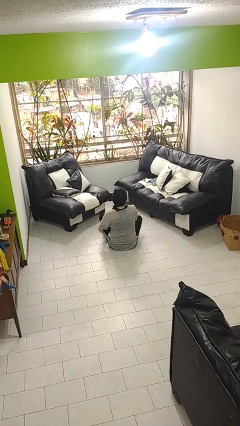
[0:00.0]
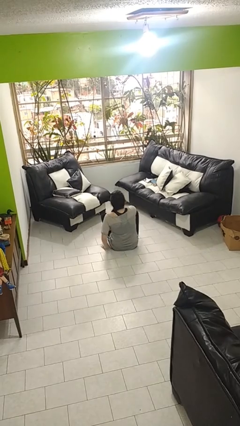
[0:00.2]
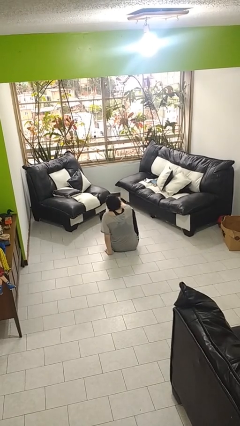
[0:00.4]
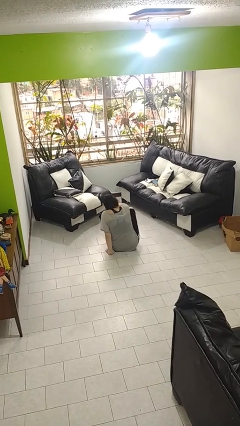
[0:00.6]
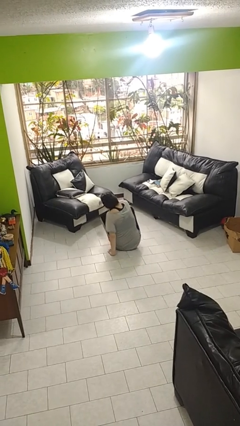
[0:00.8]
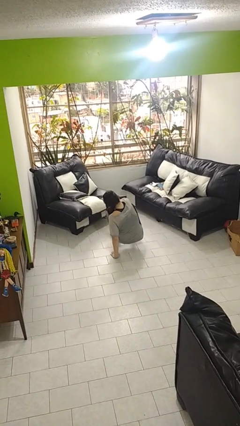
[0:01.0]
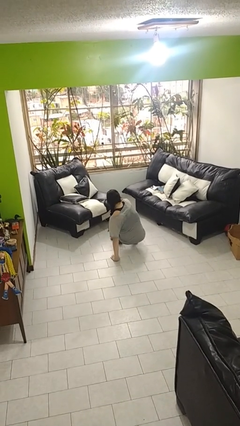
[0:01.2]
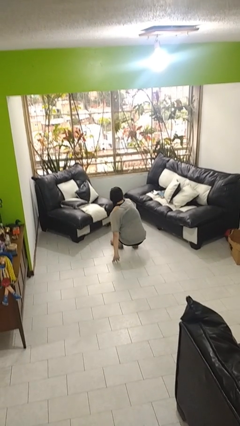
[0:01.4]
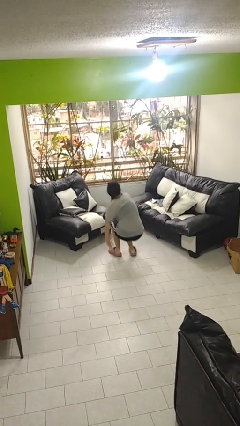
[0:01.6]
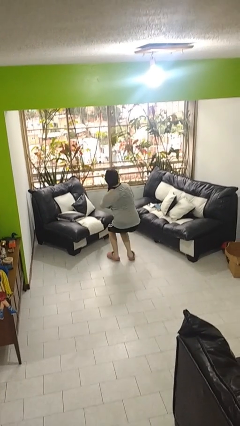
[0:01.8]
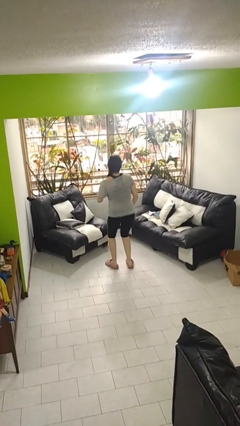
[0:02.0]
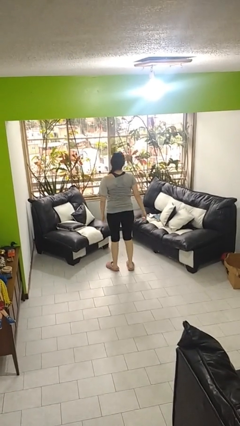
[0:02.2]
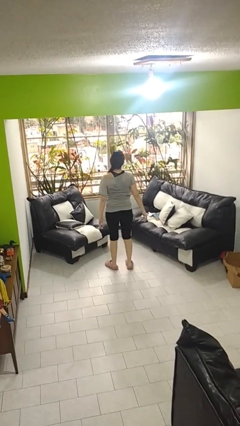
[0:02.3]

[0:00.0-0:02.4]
person stands up from floor

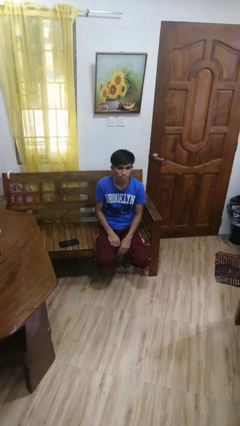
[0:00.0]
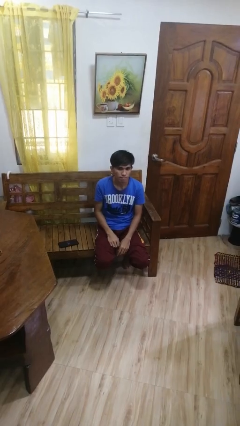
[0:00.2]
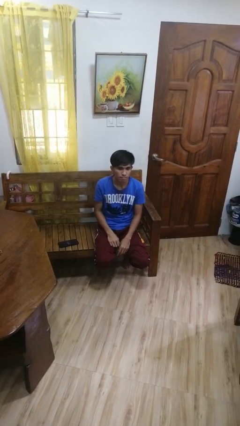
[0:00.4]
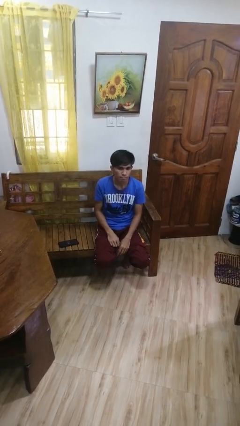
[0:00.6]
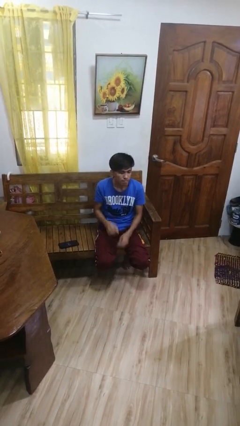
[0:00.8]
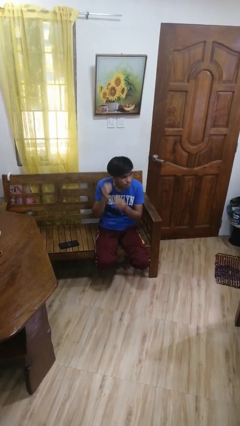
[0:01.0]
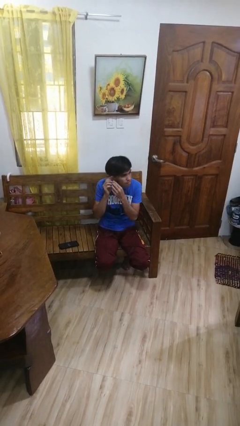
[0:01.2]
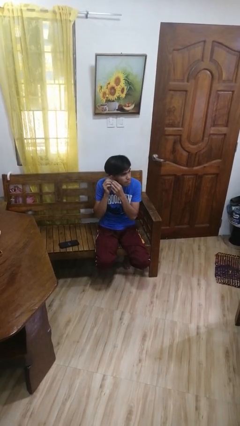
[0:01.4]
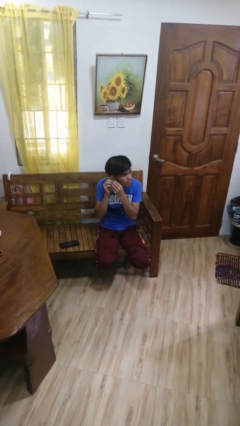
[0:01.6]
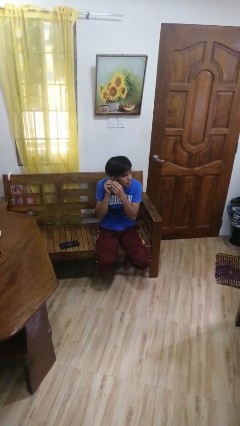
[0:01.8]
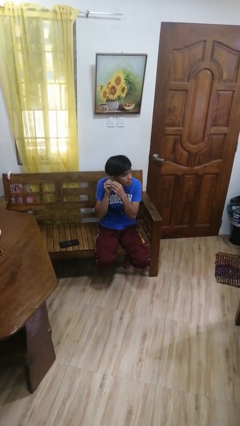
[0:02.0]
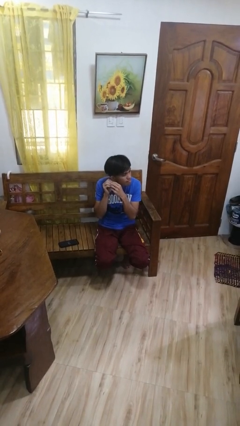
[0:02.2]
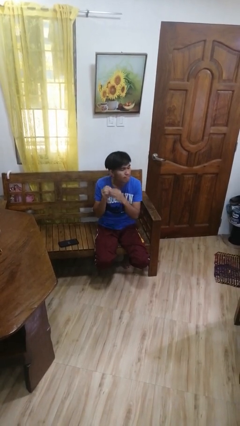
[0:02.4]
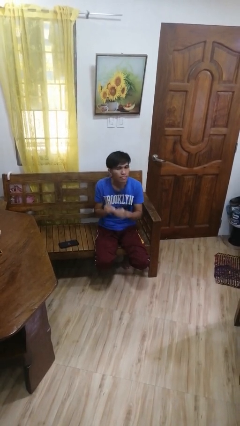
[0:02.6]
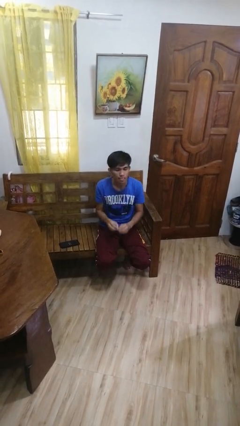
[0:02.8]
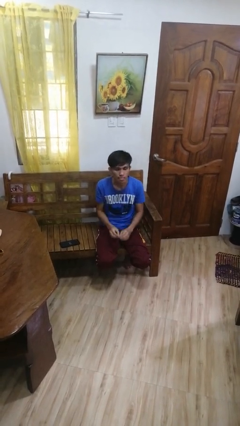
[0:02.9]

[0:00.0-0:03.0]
person takes off earrings

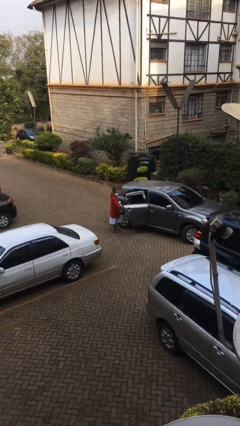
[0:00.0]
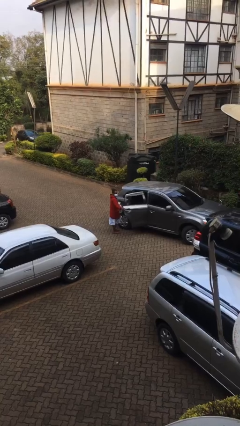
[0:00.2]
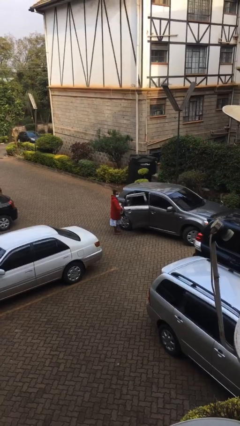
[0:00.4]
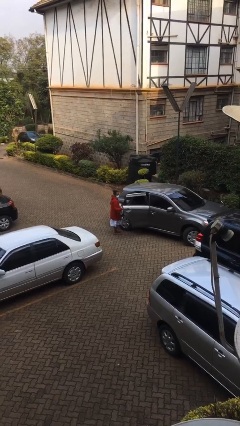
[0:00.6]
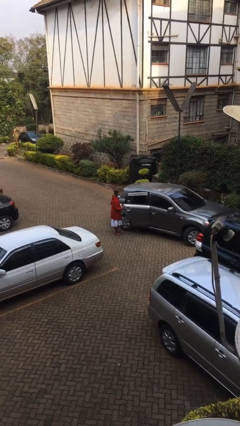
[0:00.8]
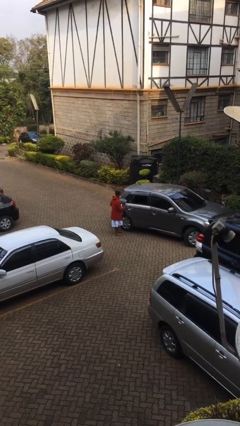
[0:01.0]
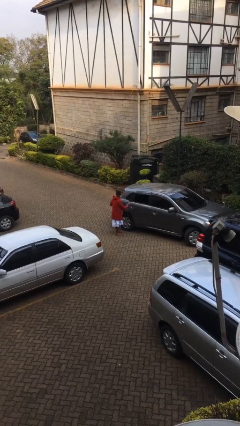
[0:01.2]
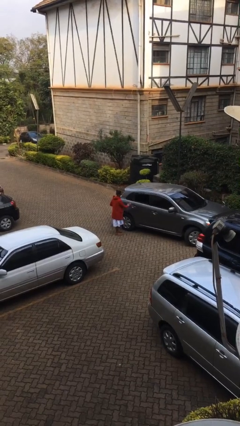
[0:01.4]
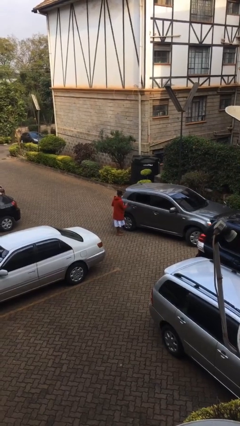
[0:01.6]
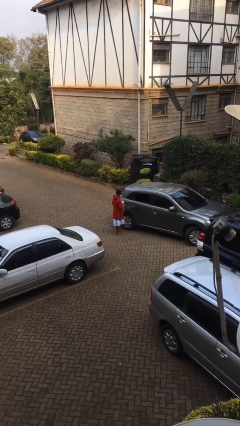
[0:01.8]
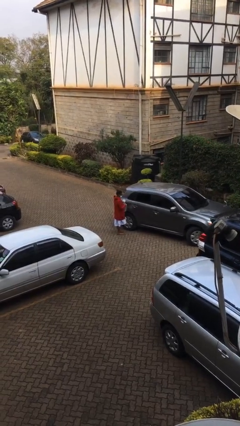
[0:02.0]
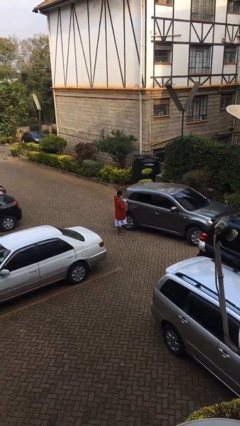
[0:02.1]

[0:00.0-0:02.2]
person closes car door

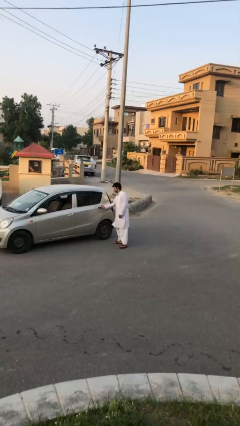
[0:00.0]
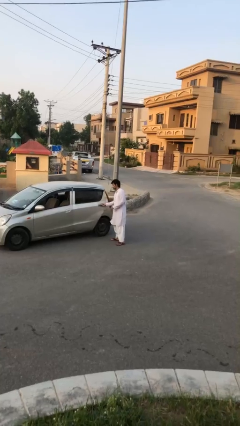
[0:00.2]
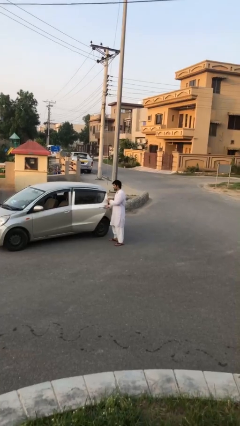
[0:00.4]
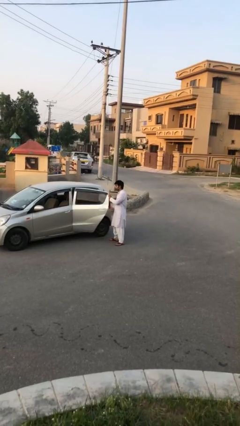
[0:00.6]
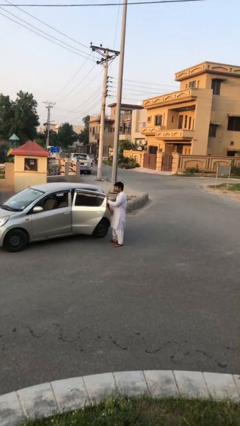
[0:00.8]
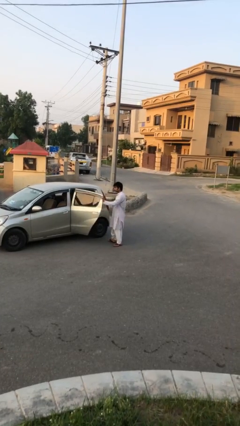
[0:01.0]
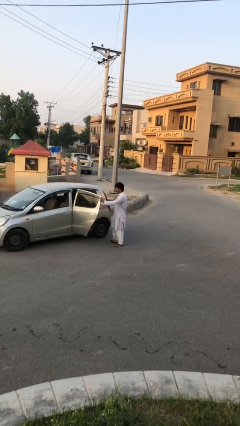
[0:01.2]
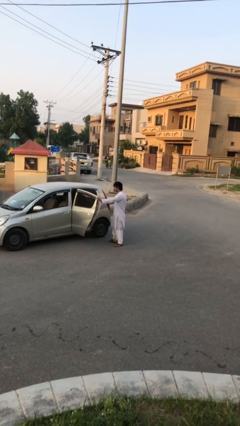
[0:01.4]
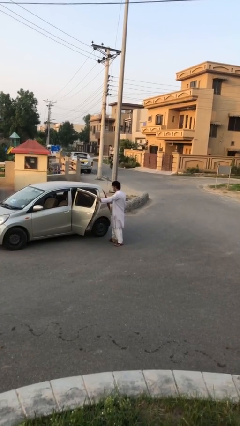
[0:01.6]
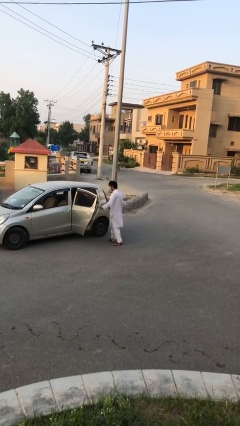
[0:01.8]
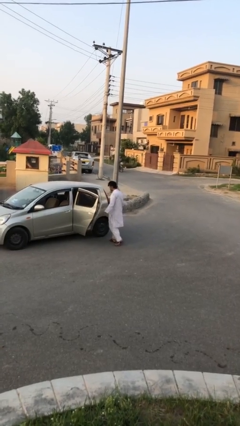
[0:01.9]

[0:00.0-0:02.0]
person opens car door

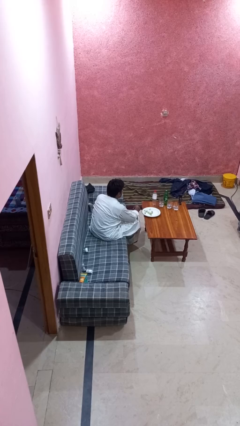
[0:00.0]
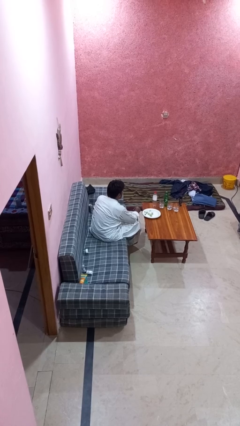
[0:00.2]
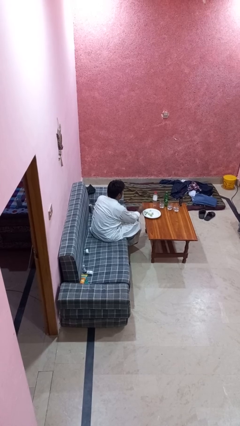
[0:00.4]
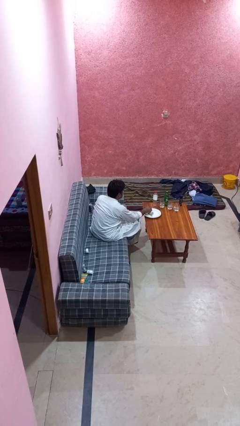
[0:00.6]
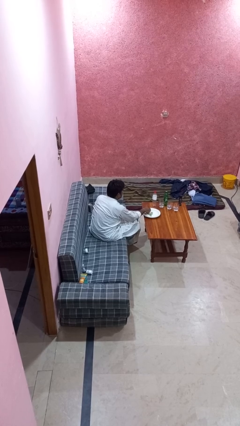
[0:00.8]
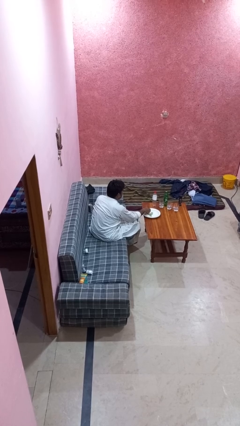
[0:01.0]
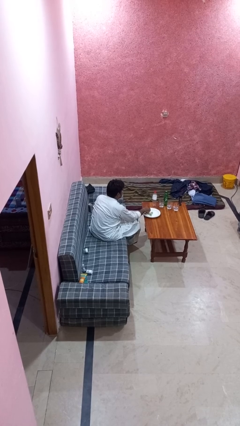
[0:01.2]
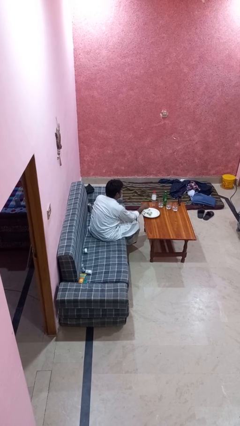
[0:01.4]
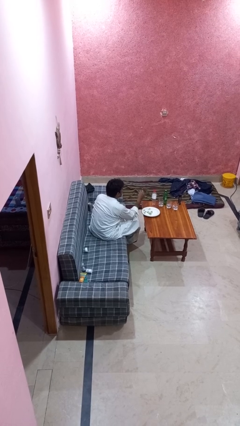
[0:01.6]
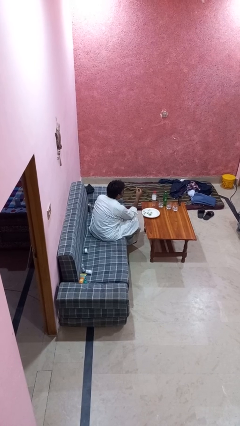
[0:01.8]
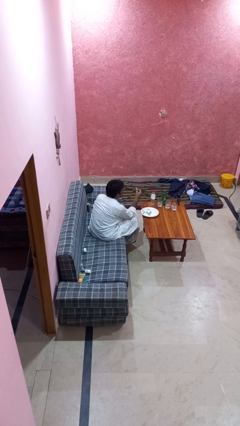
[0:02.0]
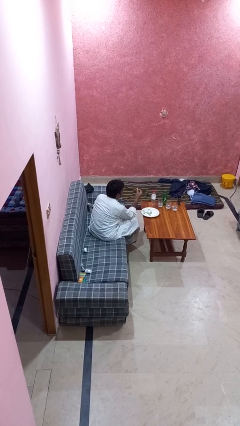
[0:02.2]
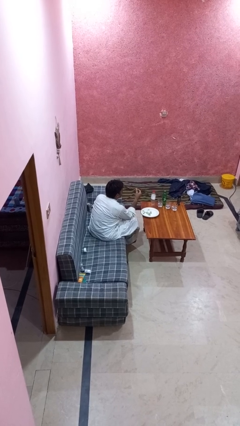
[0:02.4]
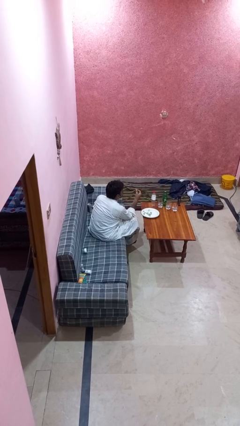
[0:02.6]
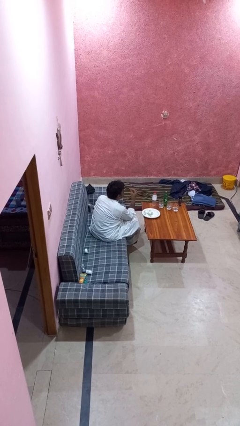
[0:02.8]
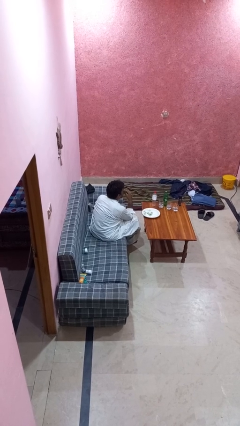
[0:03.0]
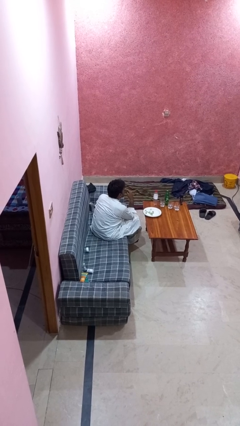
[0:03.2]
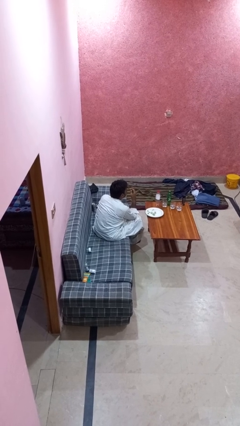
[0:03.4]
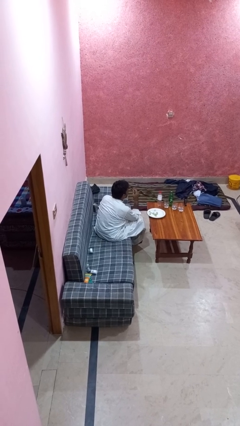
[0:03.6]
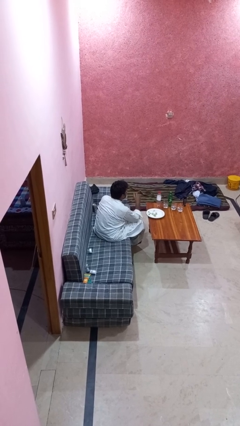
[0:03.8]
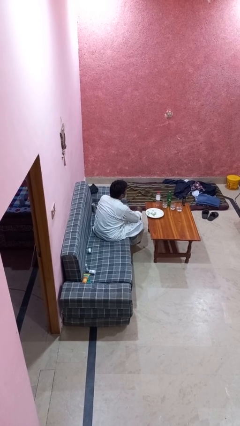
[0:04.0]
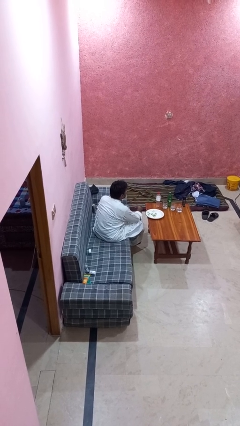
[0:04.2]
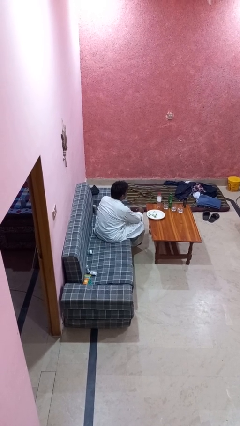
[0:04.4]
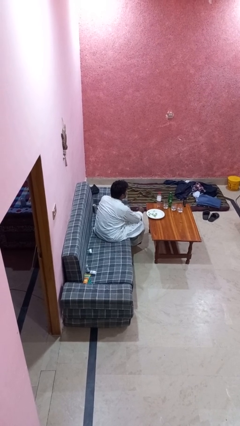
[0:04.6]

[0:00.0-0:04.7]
person eats with hands

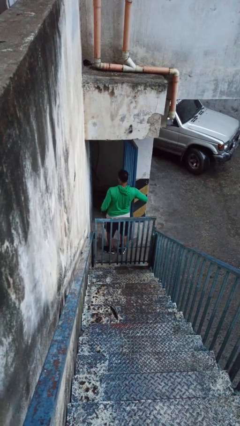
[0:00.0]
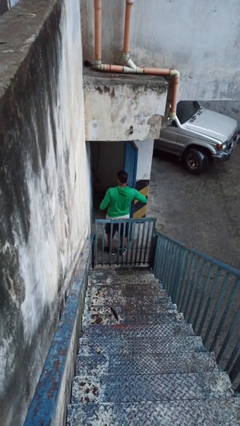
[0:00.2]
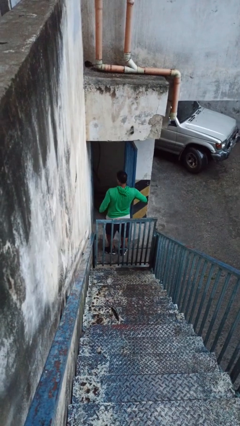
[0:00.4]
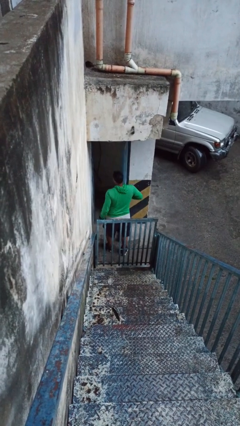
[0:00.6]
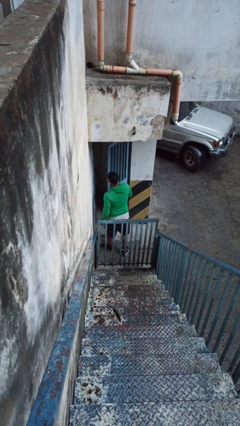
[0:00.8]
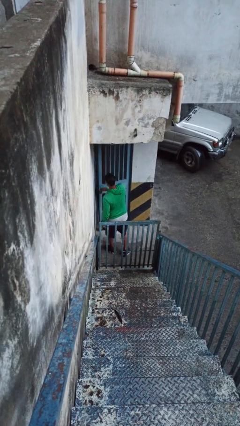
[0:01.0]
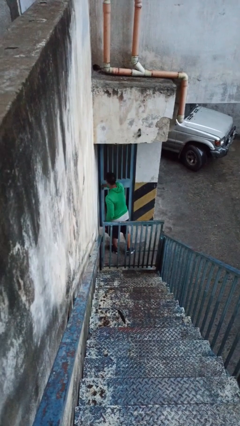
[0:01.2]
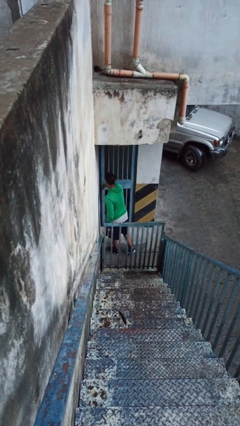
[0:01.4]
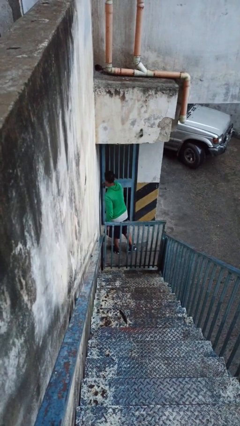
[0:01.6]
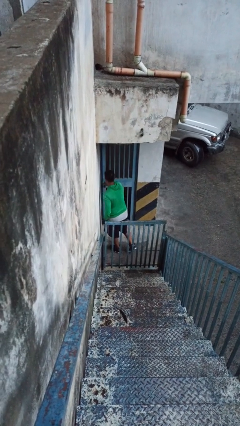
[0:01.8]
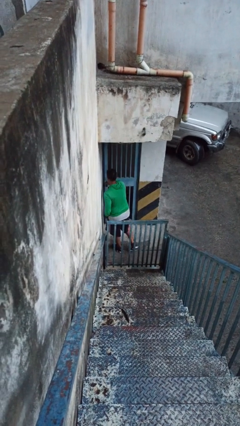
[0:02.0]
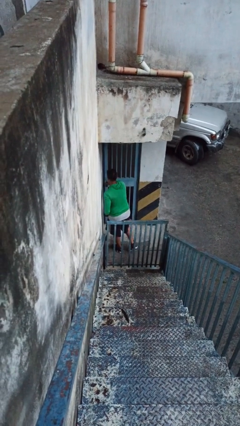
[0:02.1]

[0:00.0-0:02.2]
person closes facility door

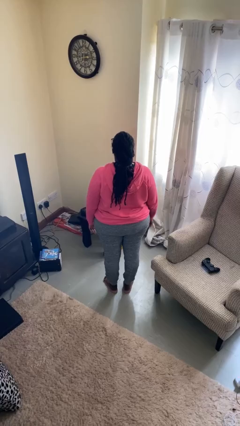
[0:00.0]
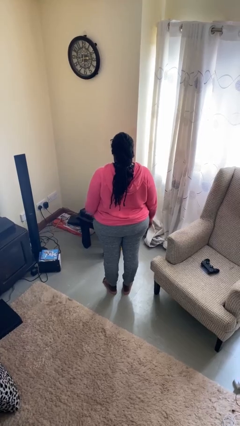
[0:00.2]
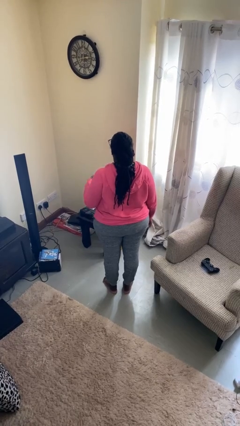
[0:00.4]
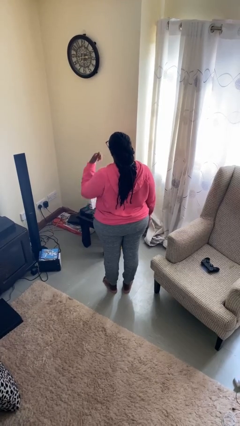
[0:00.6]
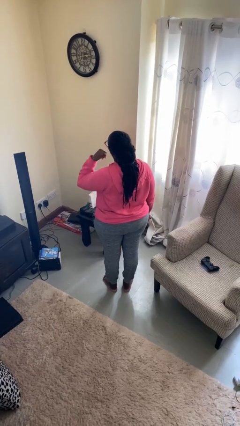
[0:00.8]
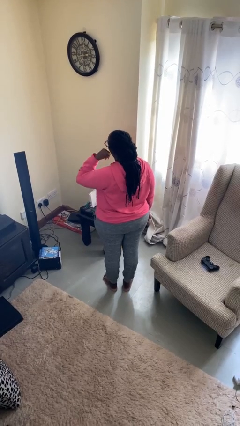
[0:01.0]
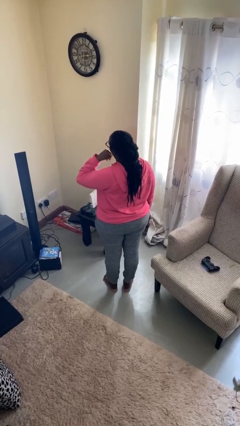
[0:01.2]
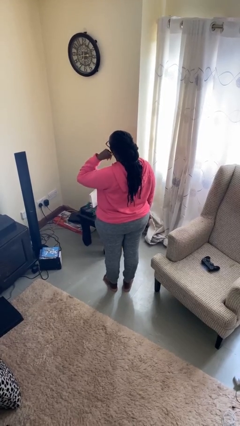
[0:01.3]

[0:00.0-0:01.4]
person gestures call me
